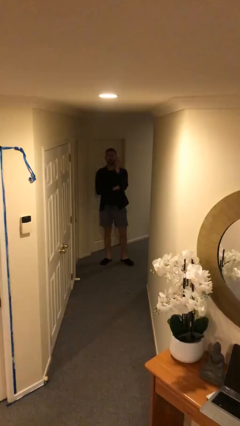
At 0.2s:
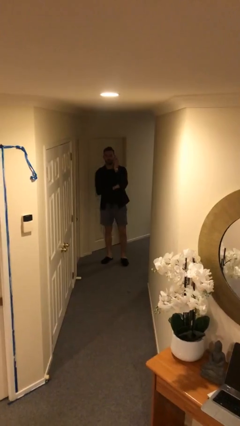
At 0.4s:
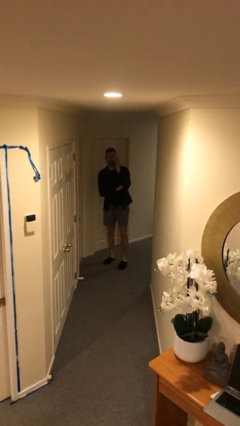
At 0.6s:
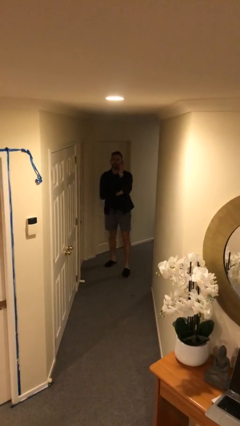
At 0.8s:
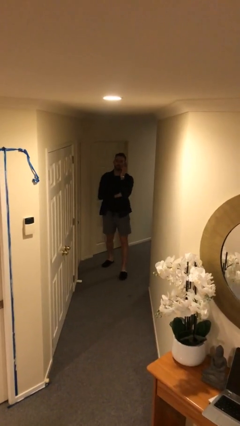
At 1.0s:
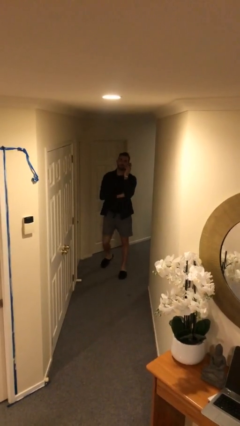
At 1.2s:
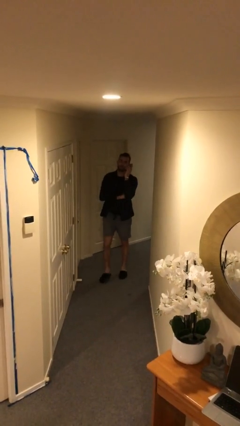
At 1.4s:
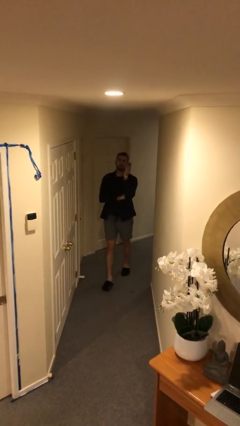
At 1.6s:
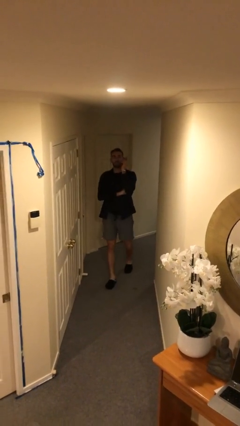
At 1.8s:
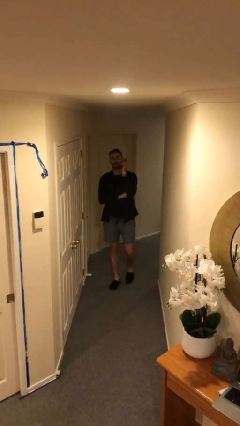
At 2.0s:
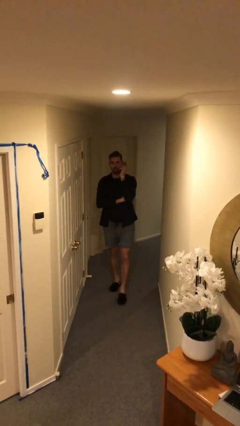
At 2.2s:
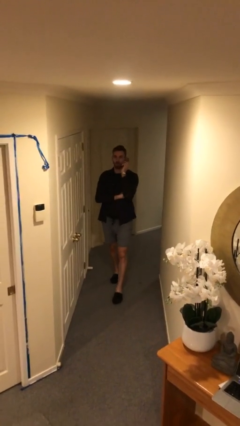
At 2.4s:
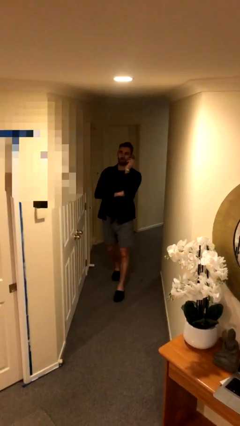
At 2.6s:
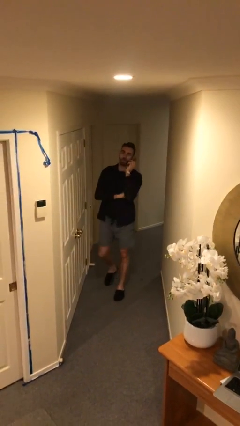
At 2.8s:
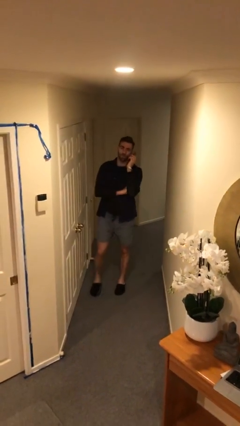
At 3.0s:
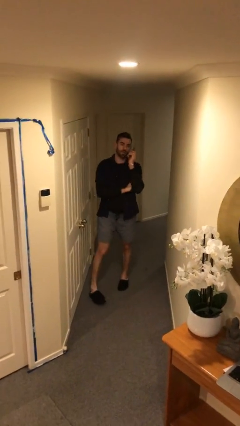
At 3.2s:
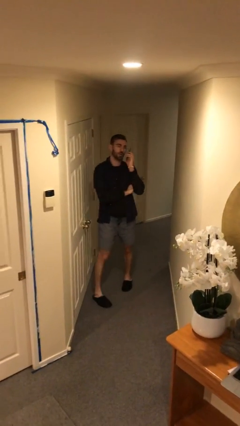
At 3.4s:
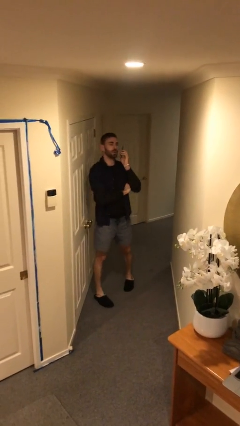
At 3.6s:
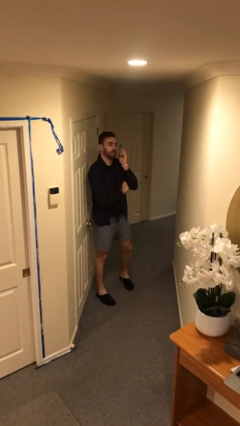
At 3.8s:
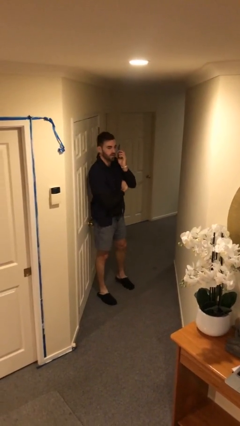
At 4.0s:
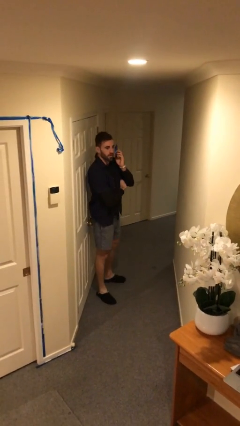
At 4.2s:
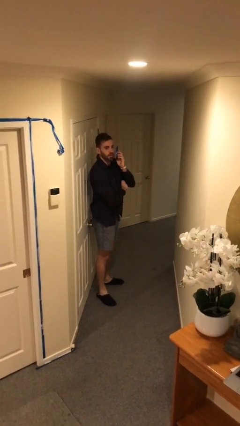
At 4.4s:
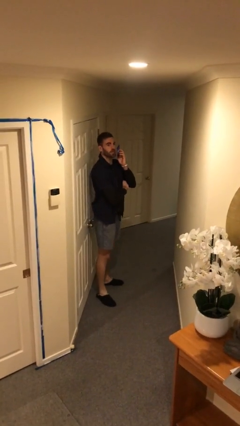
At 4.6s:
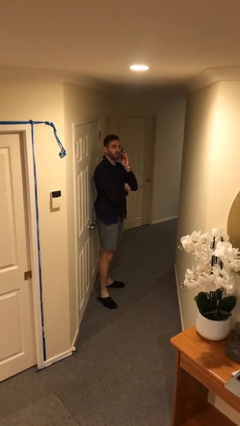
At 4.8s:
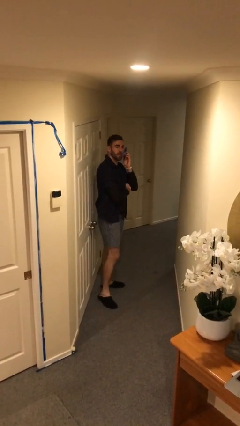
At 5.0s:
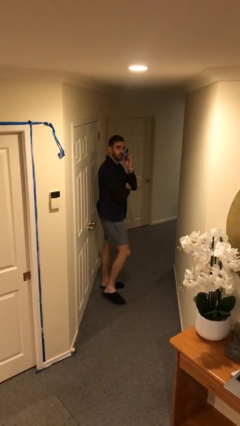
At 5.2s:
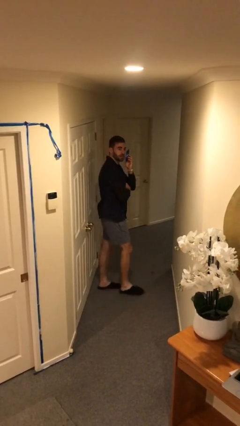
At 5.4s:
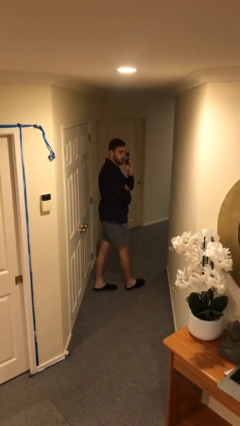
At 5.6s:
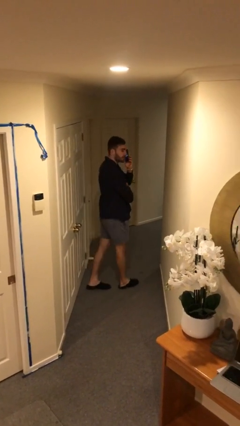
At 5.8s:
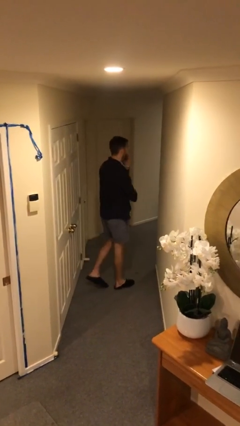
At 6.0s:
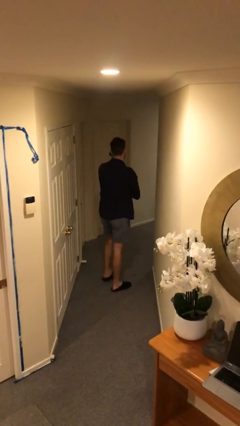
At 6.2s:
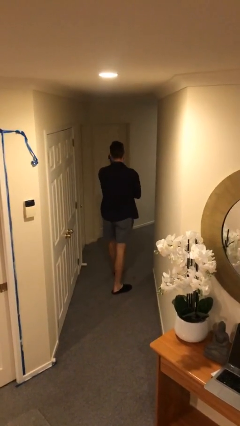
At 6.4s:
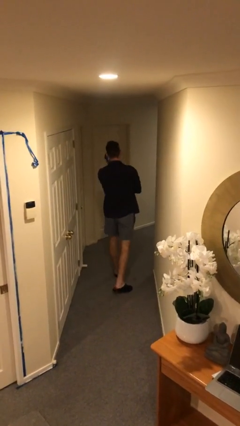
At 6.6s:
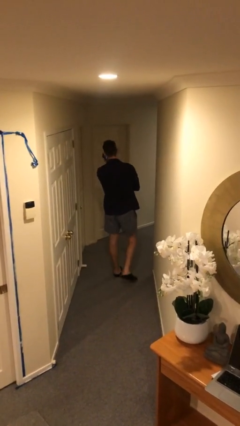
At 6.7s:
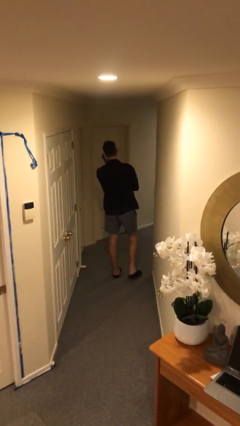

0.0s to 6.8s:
person talks on phone

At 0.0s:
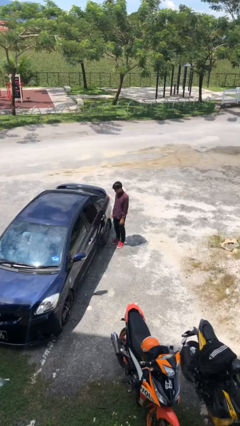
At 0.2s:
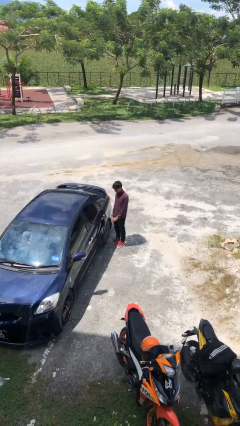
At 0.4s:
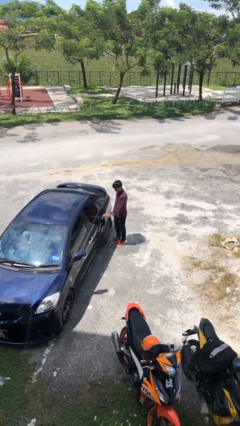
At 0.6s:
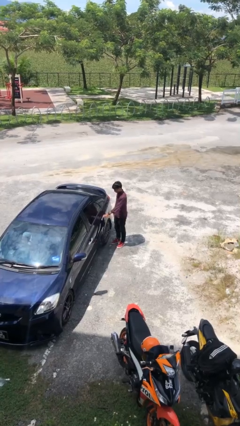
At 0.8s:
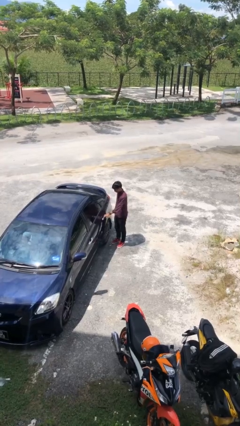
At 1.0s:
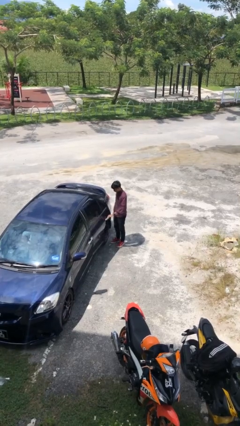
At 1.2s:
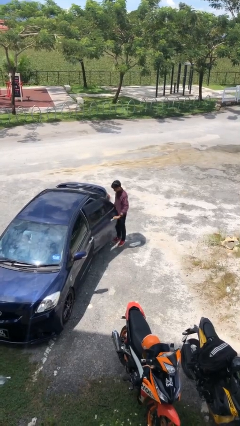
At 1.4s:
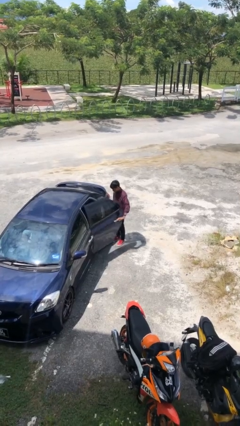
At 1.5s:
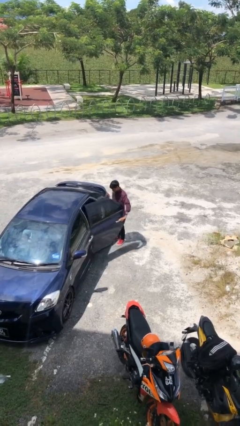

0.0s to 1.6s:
person opens car door

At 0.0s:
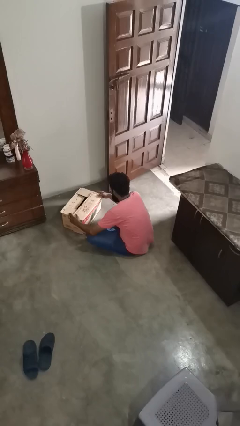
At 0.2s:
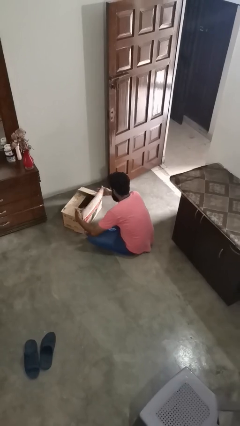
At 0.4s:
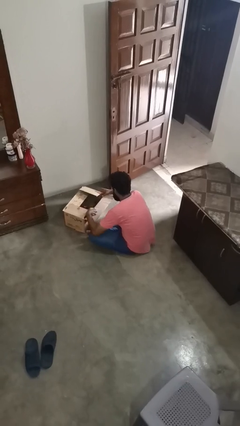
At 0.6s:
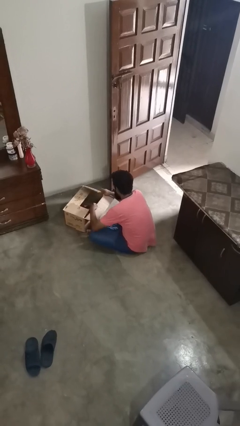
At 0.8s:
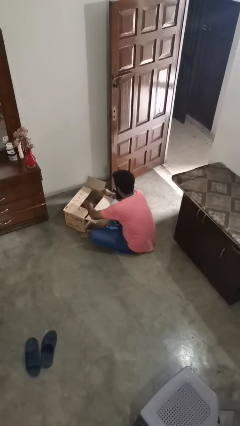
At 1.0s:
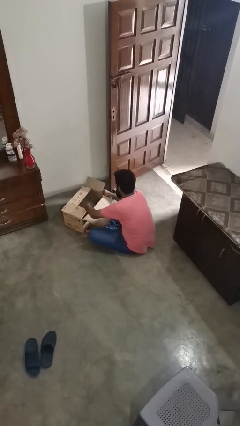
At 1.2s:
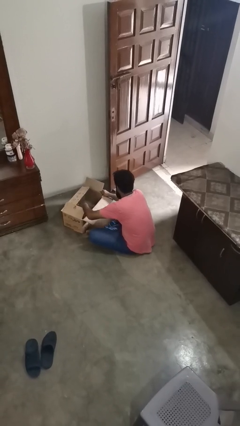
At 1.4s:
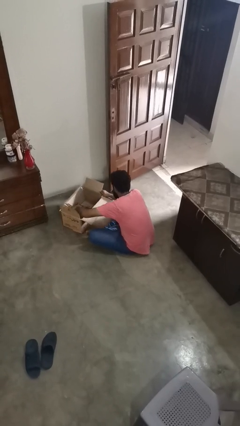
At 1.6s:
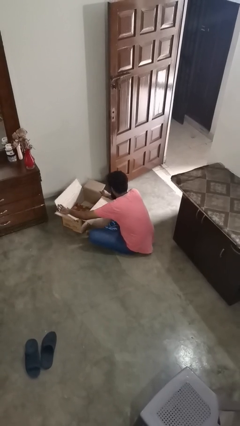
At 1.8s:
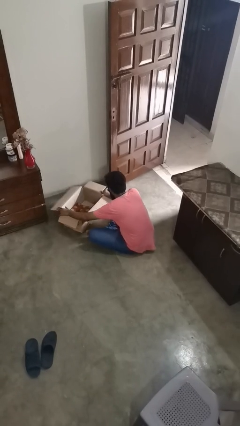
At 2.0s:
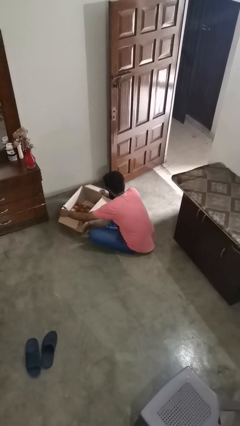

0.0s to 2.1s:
person opens box

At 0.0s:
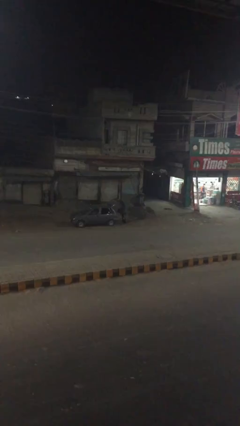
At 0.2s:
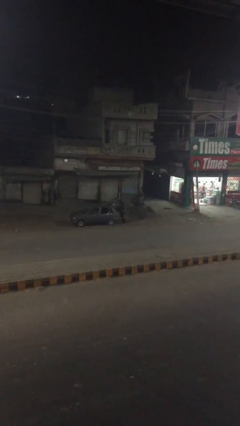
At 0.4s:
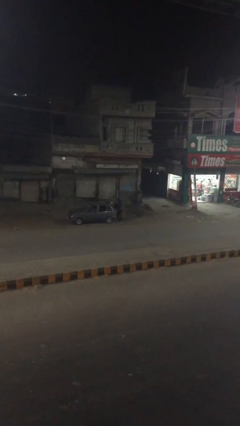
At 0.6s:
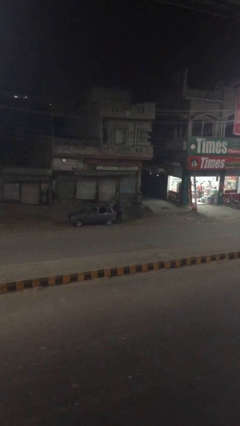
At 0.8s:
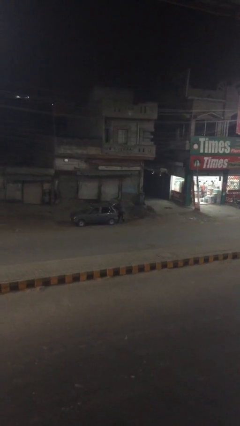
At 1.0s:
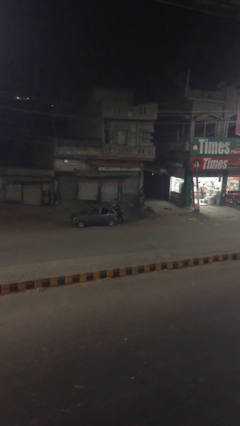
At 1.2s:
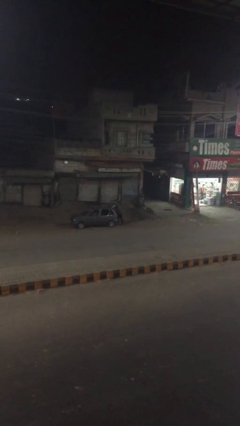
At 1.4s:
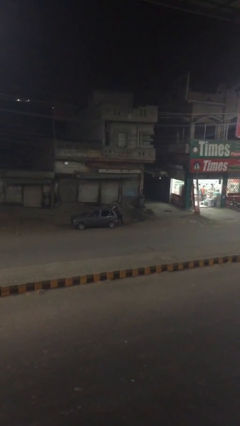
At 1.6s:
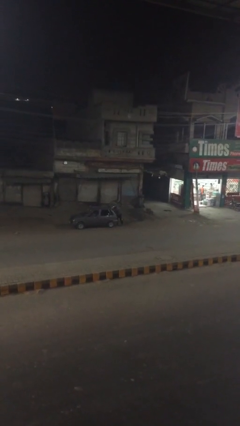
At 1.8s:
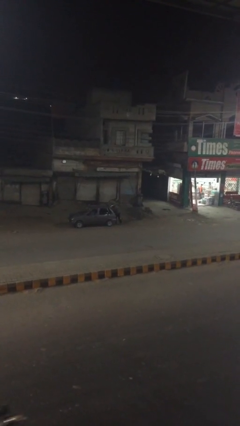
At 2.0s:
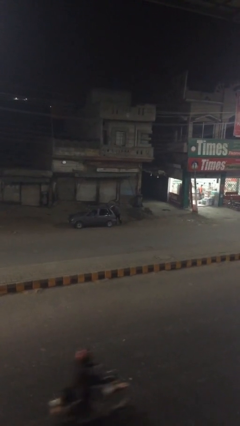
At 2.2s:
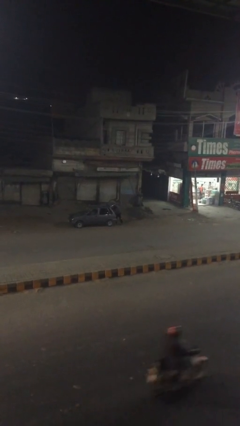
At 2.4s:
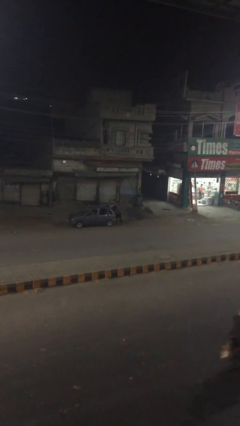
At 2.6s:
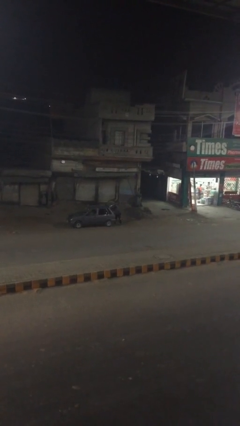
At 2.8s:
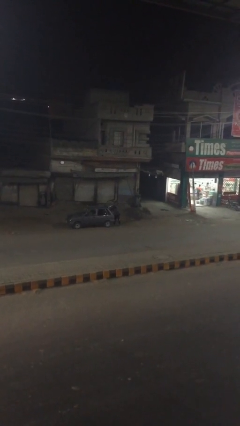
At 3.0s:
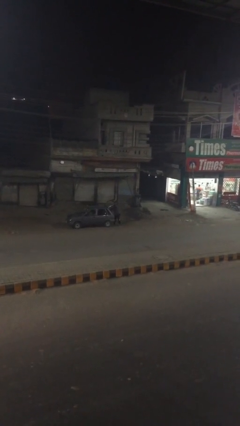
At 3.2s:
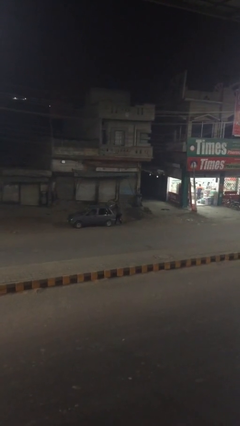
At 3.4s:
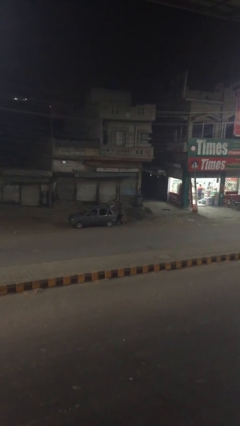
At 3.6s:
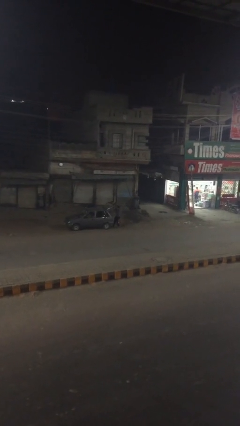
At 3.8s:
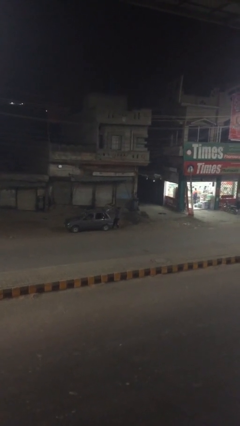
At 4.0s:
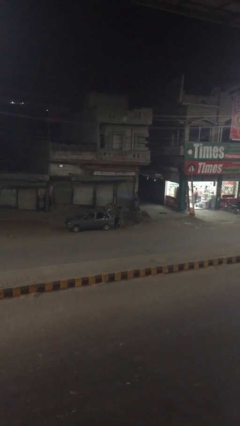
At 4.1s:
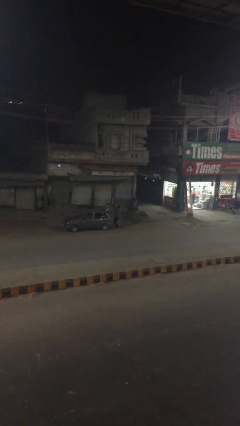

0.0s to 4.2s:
person loads car

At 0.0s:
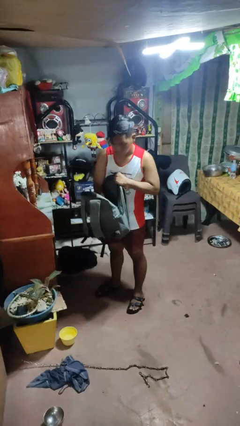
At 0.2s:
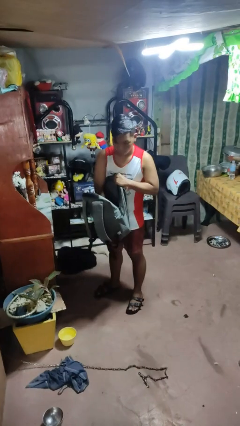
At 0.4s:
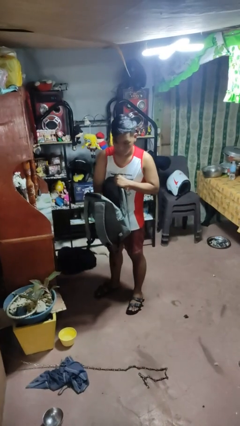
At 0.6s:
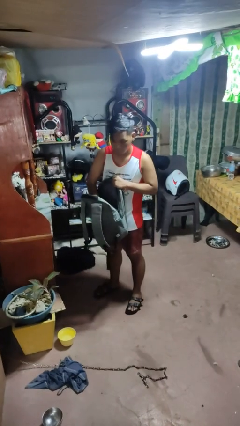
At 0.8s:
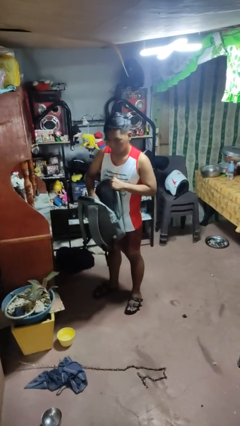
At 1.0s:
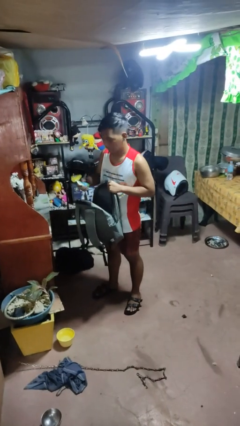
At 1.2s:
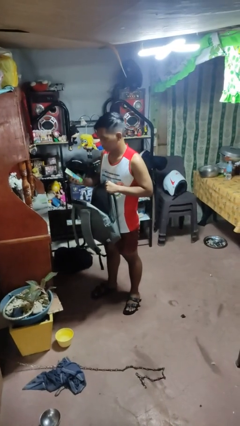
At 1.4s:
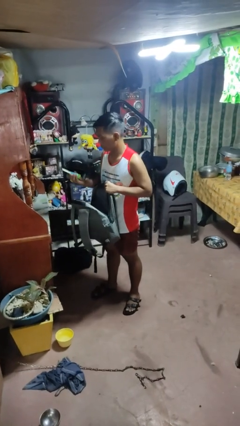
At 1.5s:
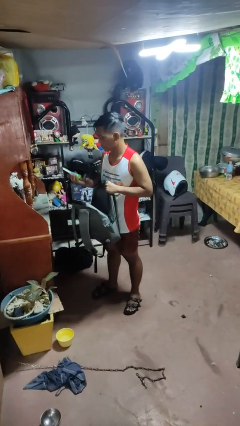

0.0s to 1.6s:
person takes object from bag

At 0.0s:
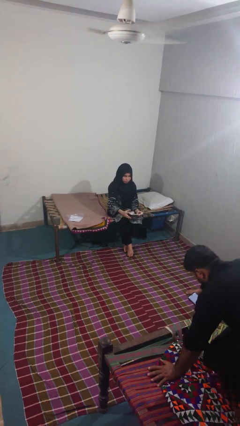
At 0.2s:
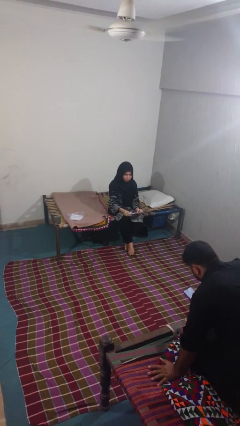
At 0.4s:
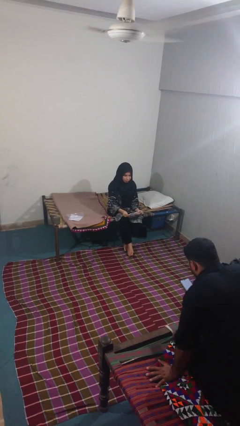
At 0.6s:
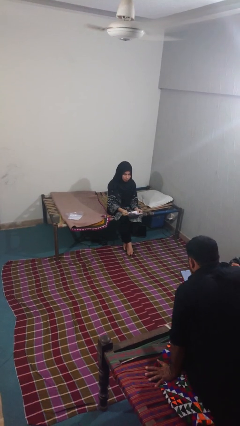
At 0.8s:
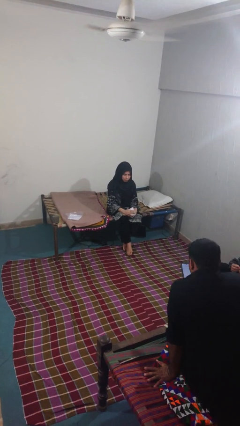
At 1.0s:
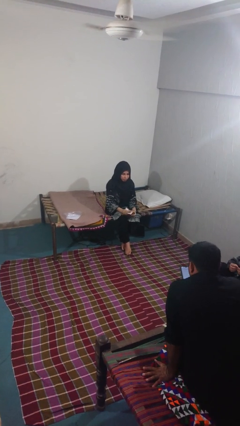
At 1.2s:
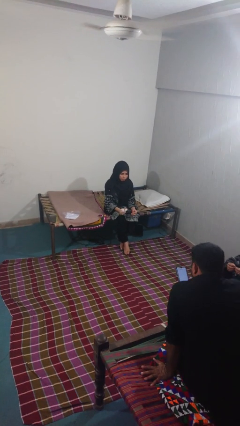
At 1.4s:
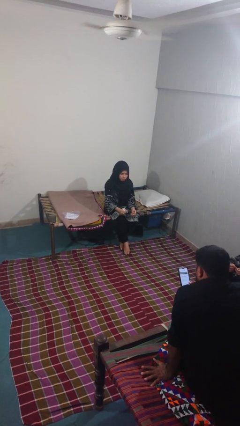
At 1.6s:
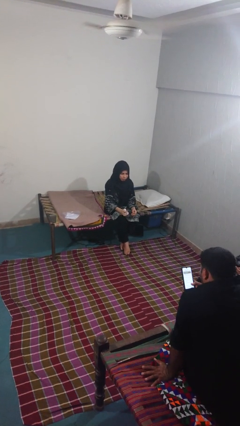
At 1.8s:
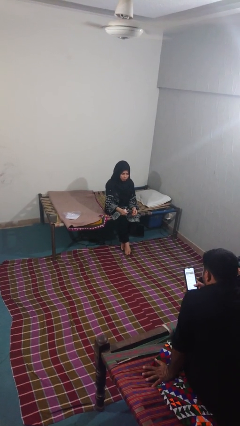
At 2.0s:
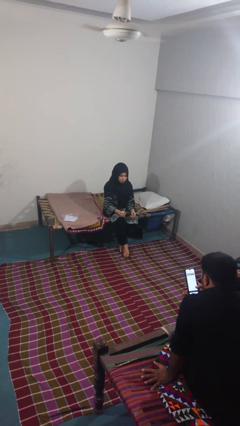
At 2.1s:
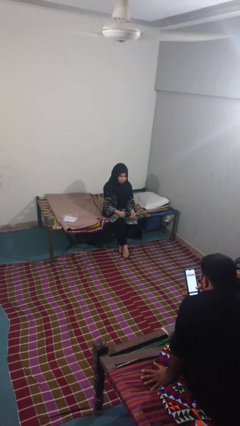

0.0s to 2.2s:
person crumples paper
